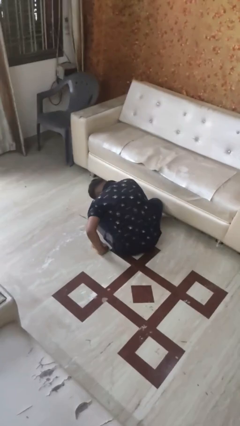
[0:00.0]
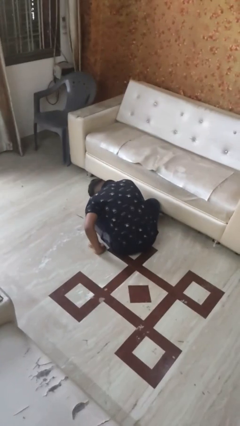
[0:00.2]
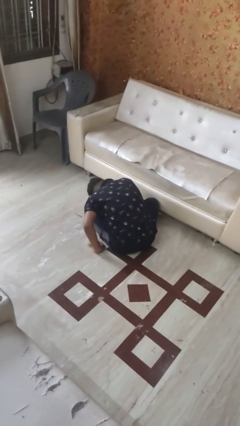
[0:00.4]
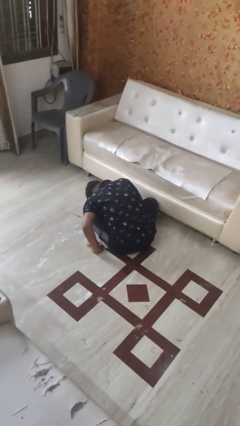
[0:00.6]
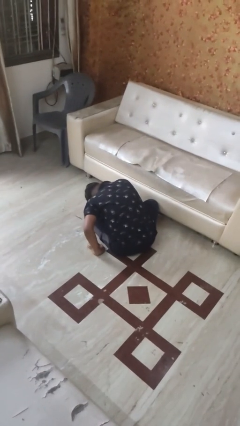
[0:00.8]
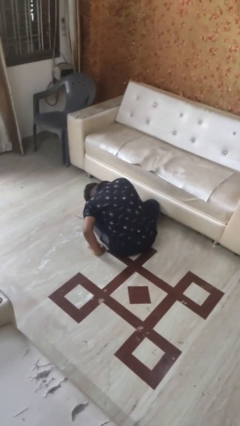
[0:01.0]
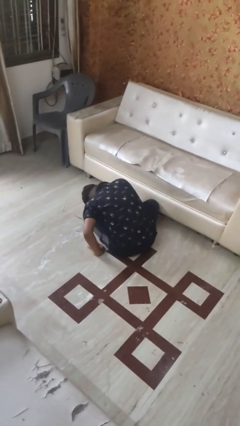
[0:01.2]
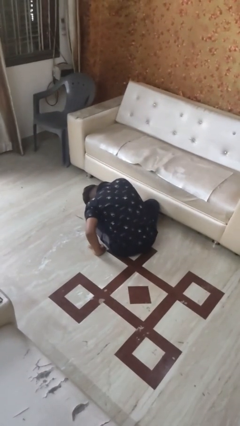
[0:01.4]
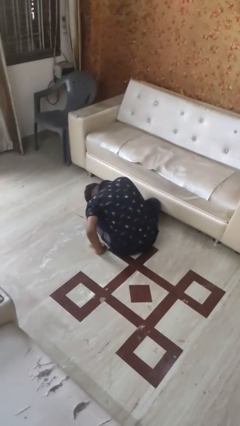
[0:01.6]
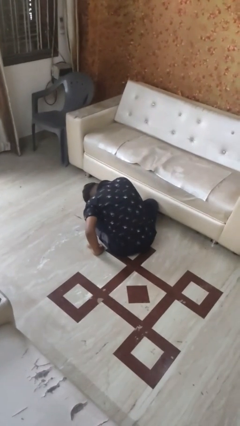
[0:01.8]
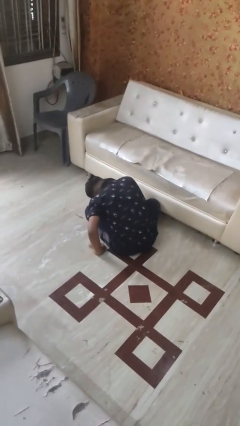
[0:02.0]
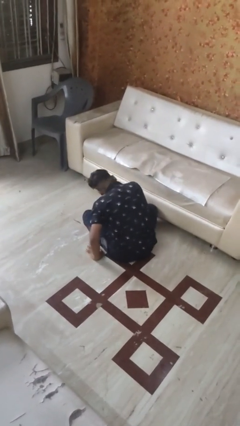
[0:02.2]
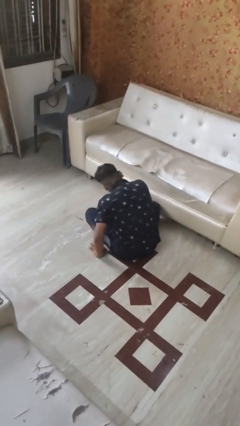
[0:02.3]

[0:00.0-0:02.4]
person searches under bed

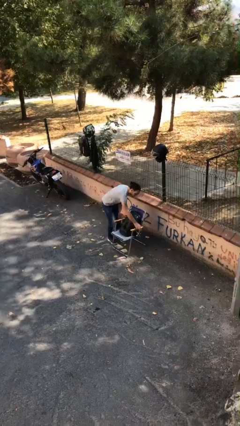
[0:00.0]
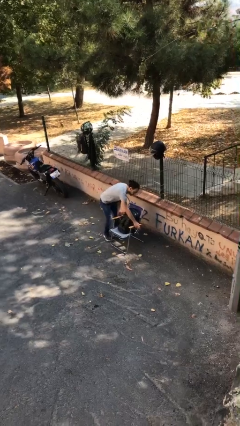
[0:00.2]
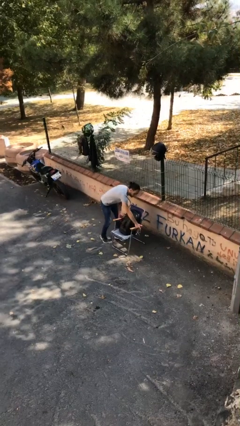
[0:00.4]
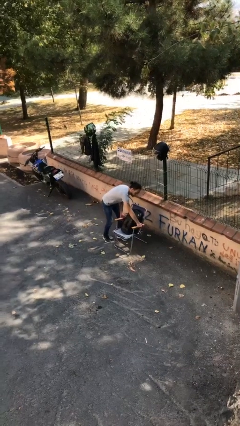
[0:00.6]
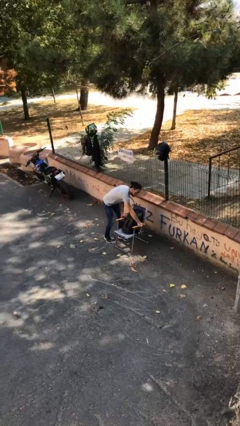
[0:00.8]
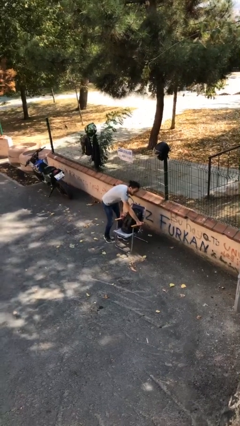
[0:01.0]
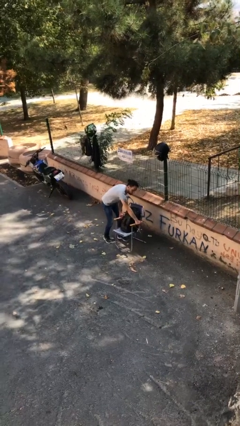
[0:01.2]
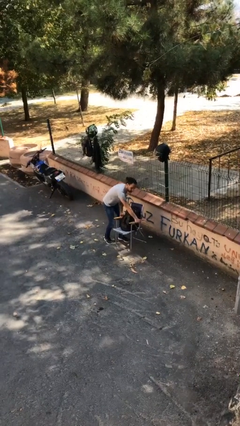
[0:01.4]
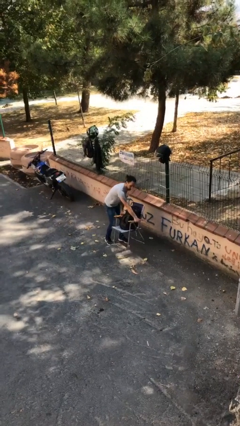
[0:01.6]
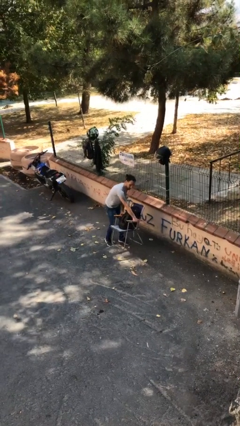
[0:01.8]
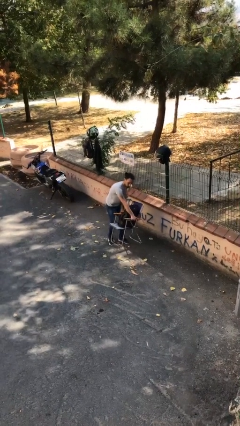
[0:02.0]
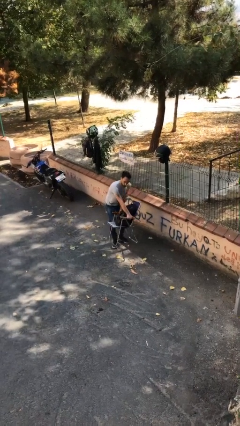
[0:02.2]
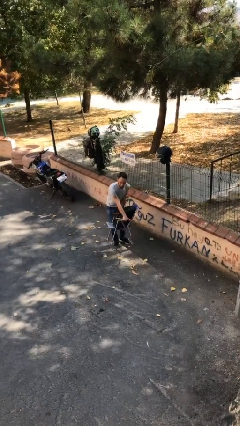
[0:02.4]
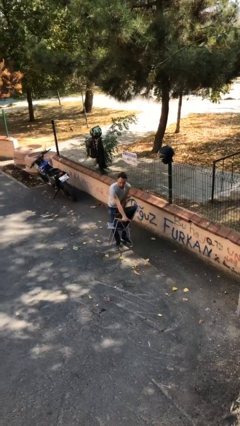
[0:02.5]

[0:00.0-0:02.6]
person picks up object from floor

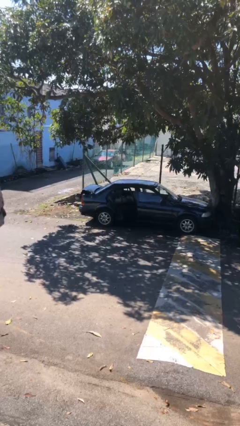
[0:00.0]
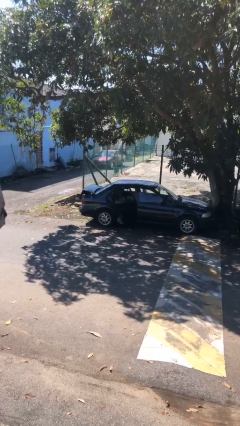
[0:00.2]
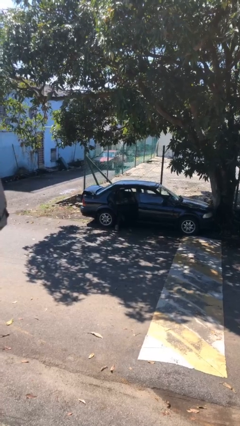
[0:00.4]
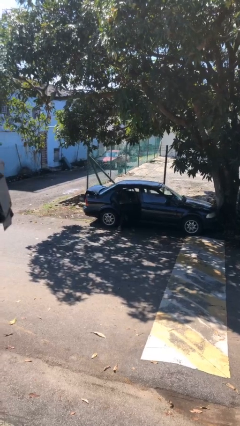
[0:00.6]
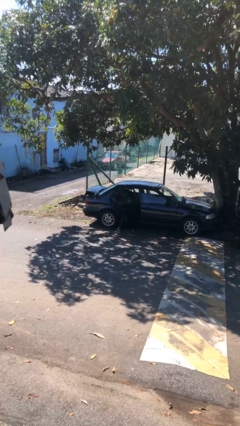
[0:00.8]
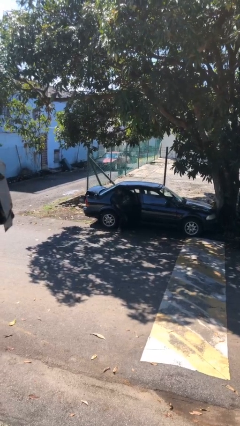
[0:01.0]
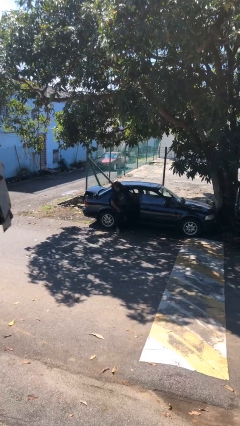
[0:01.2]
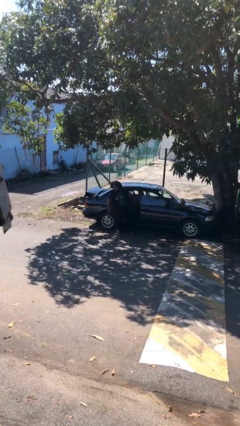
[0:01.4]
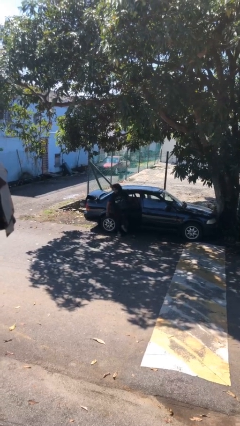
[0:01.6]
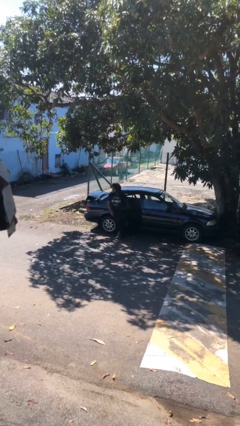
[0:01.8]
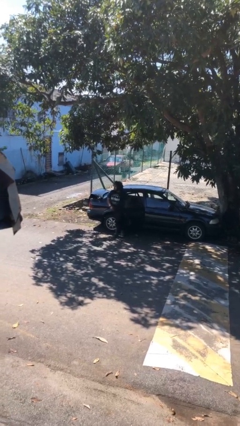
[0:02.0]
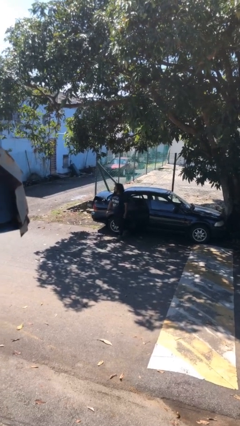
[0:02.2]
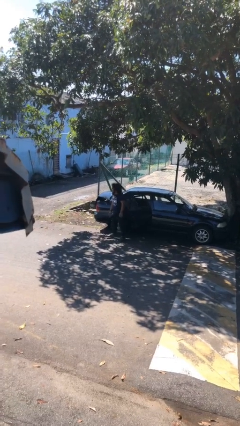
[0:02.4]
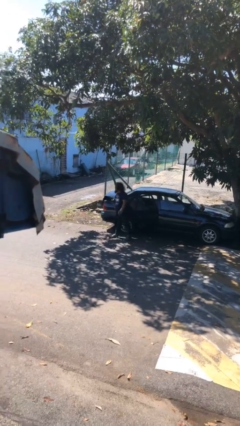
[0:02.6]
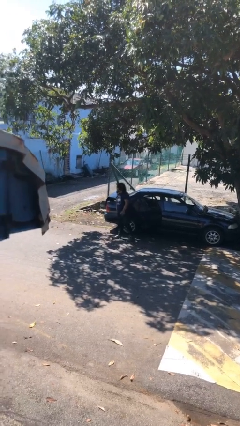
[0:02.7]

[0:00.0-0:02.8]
person exits car

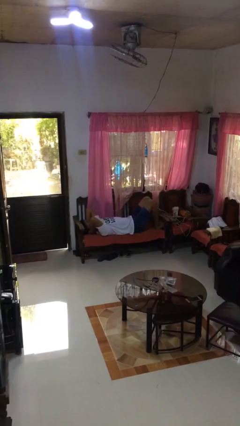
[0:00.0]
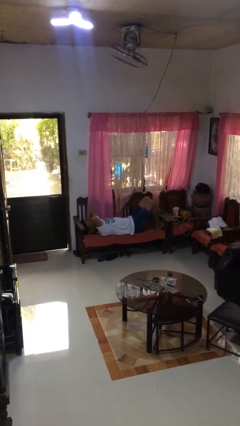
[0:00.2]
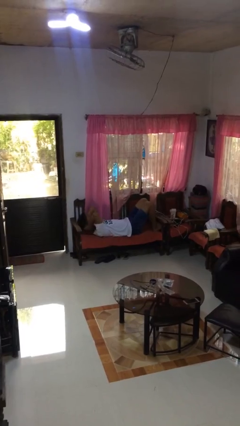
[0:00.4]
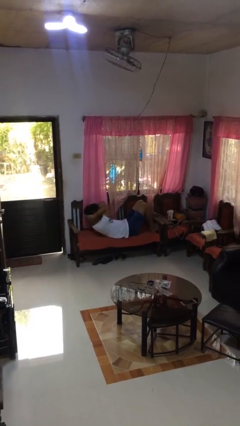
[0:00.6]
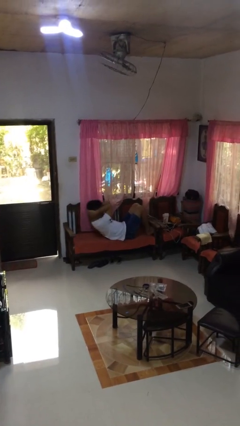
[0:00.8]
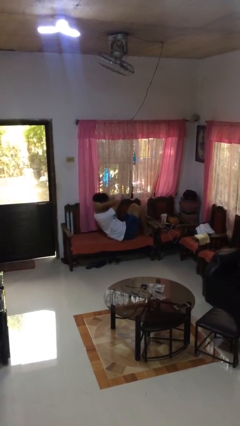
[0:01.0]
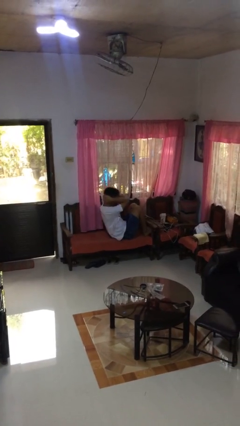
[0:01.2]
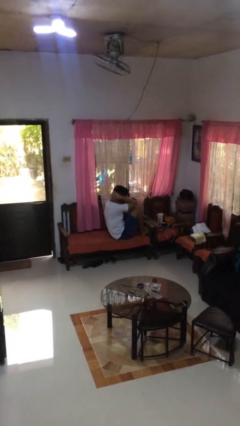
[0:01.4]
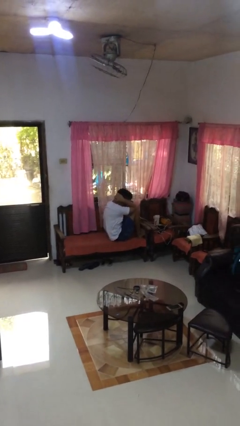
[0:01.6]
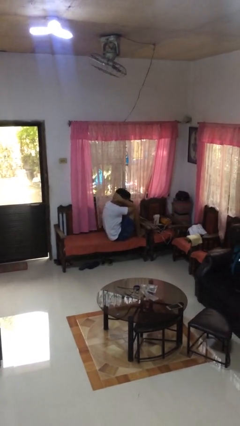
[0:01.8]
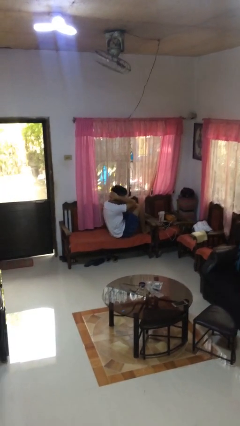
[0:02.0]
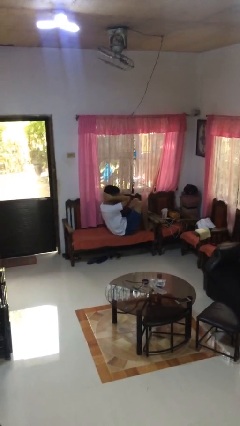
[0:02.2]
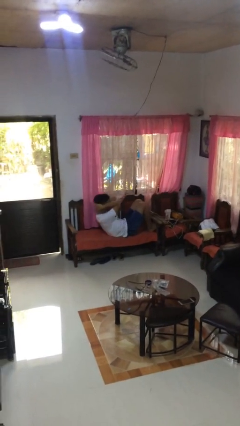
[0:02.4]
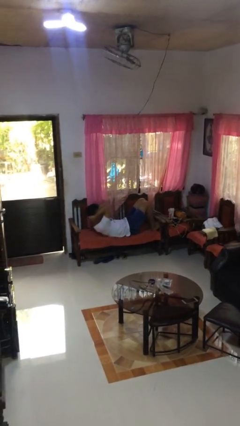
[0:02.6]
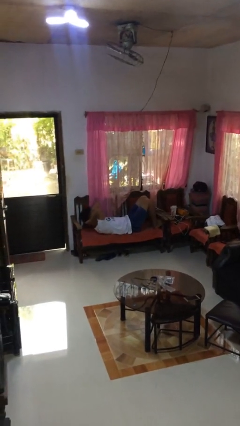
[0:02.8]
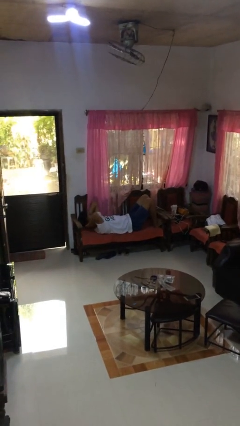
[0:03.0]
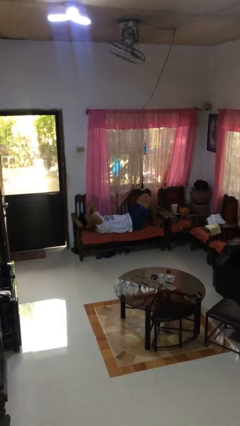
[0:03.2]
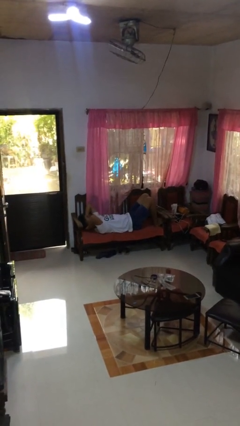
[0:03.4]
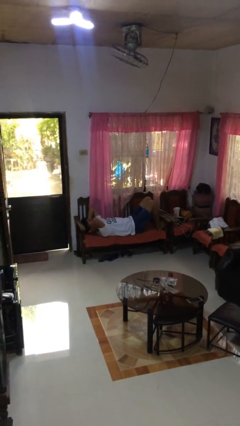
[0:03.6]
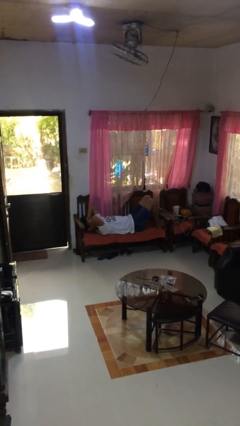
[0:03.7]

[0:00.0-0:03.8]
person exercises with situp

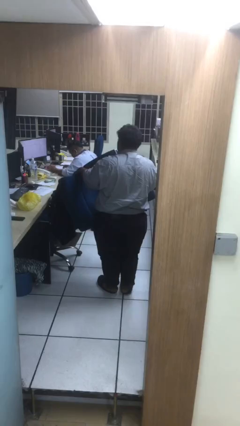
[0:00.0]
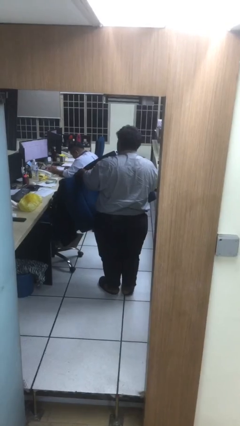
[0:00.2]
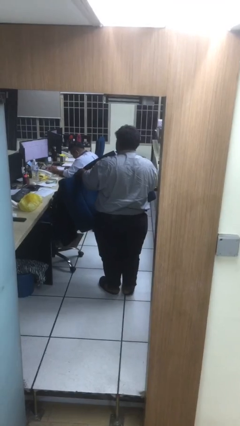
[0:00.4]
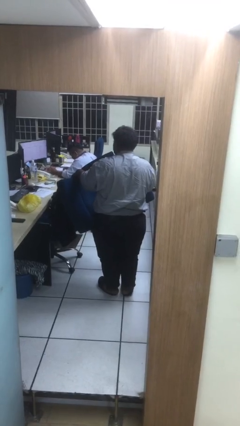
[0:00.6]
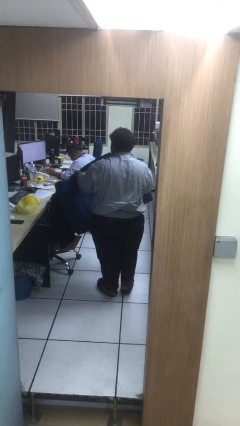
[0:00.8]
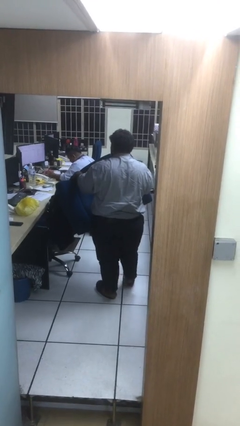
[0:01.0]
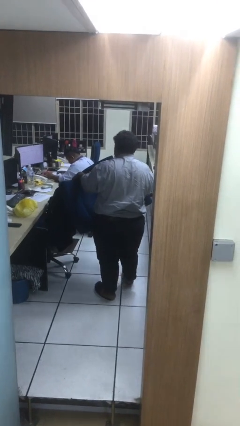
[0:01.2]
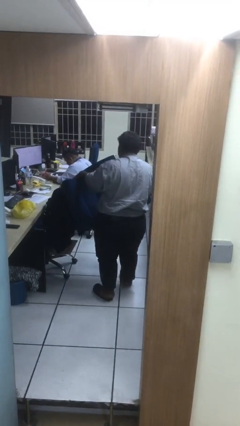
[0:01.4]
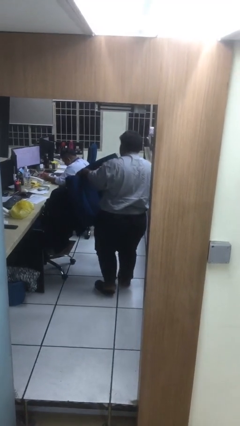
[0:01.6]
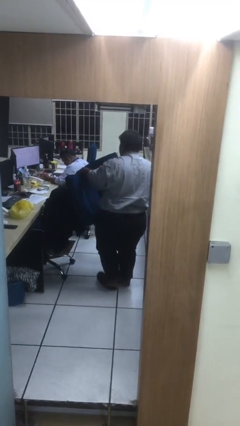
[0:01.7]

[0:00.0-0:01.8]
person carries furniture

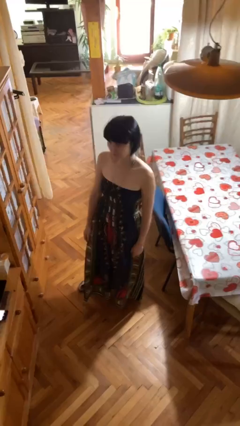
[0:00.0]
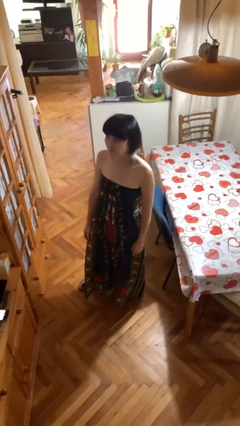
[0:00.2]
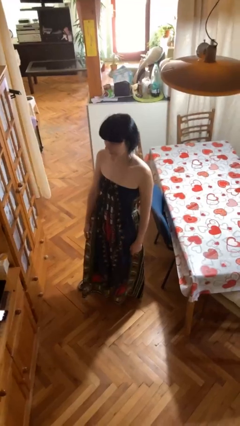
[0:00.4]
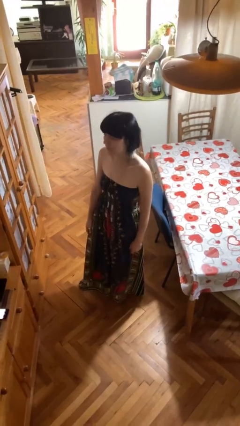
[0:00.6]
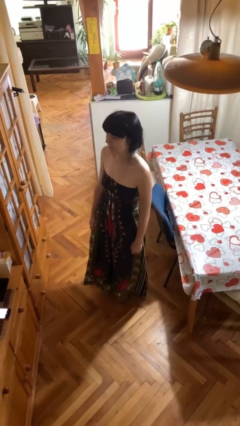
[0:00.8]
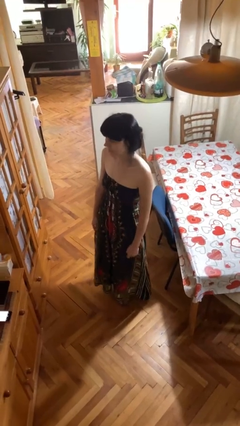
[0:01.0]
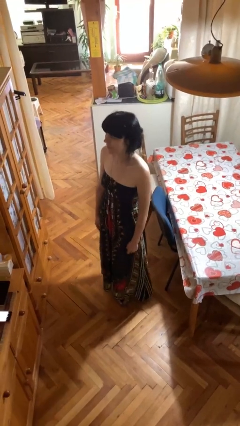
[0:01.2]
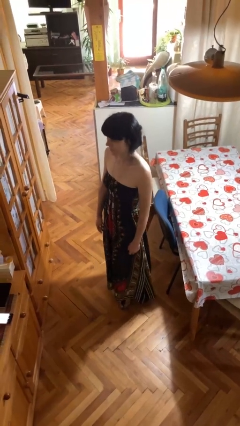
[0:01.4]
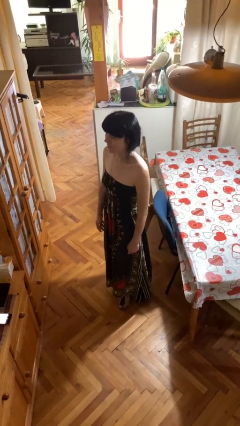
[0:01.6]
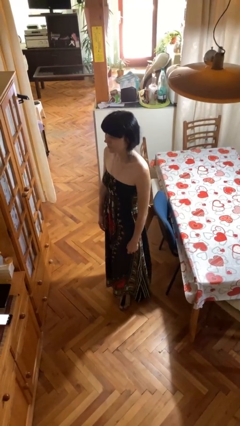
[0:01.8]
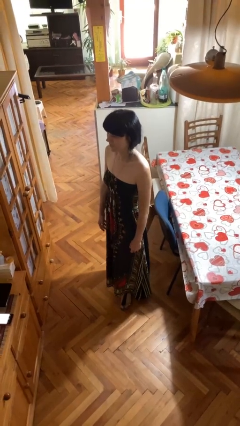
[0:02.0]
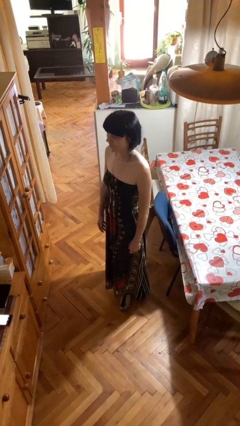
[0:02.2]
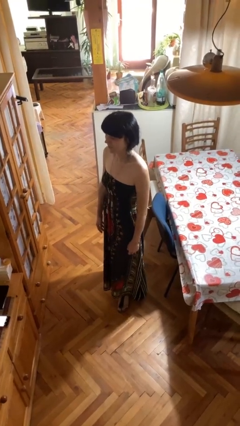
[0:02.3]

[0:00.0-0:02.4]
person nods head

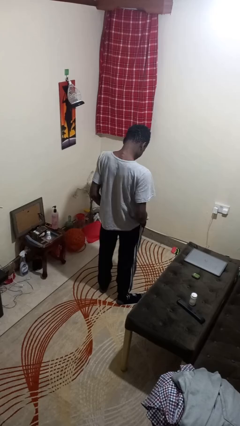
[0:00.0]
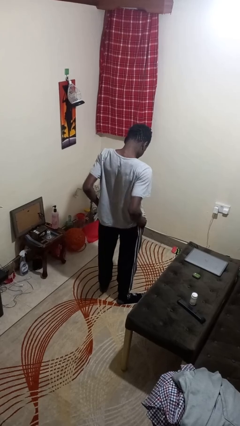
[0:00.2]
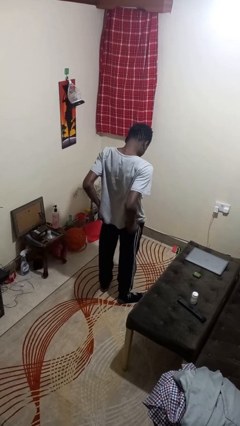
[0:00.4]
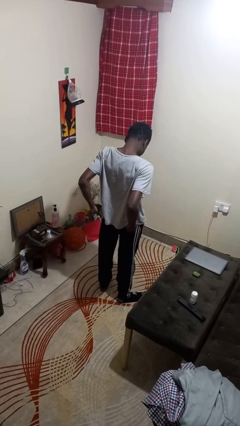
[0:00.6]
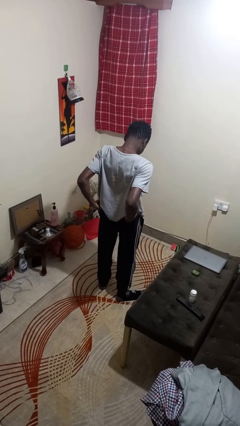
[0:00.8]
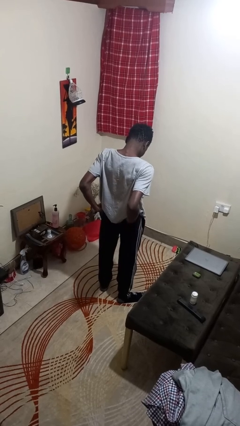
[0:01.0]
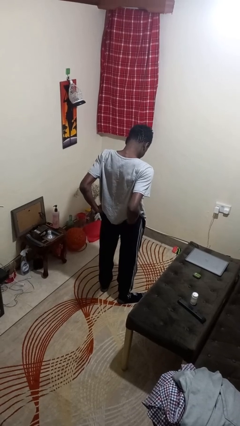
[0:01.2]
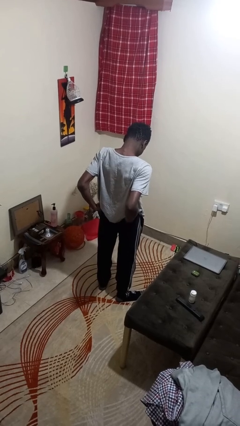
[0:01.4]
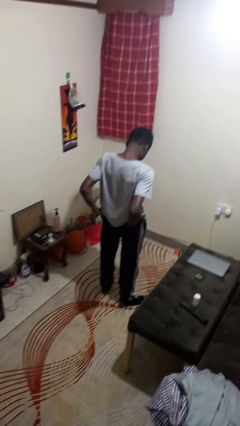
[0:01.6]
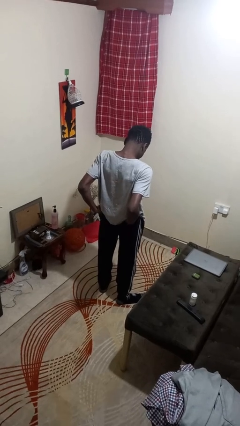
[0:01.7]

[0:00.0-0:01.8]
person puts hands in back pockets
